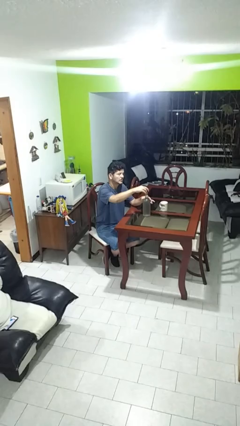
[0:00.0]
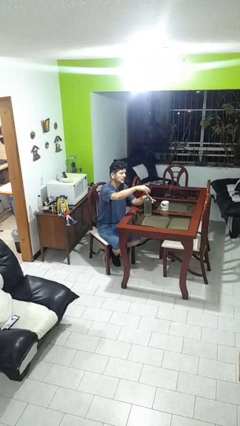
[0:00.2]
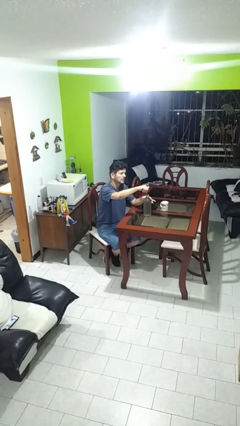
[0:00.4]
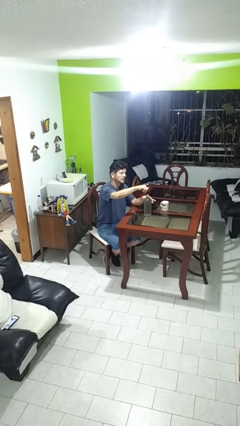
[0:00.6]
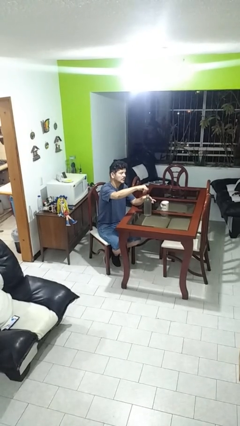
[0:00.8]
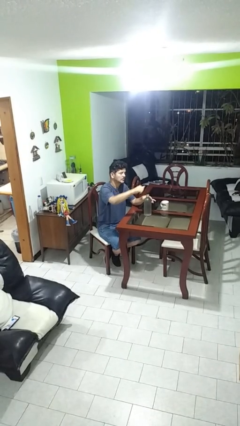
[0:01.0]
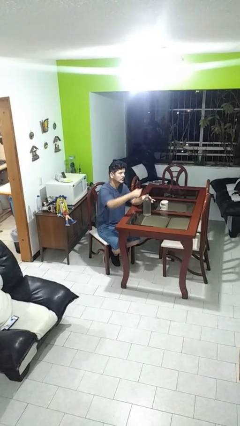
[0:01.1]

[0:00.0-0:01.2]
person screws lid to bottle

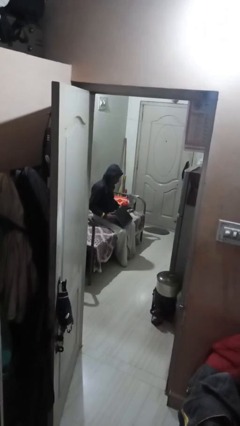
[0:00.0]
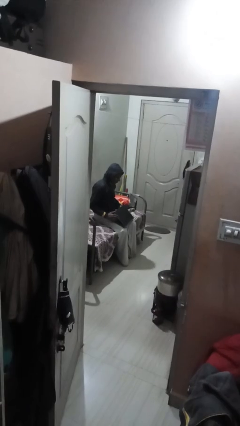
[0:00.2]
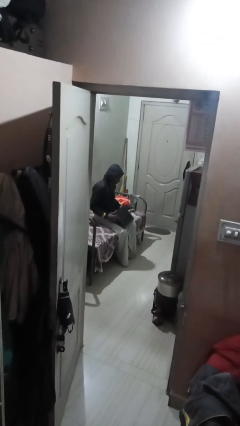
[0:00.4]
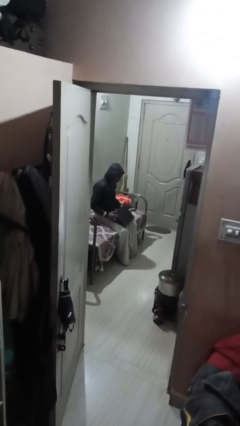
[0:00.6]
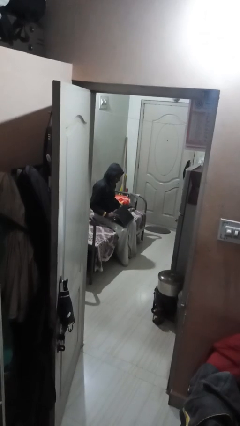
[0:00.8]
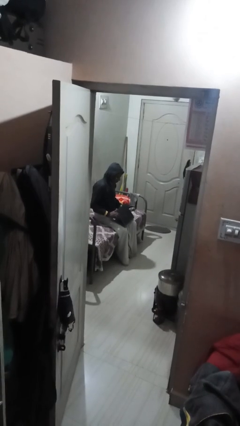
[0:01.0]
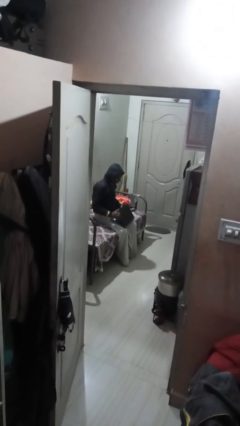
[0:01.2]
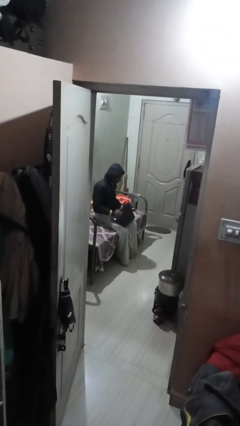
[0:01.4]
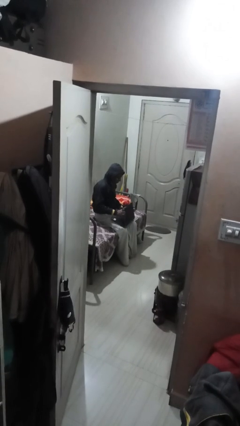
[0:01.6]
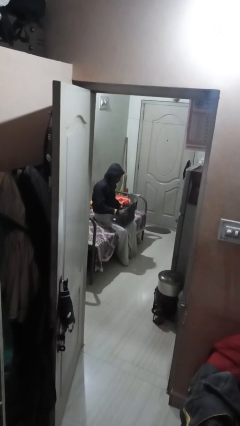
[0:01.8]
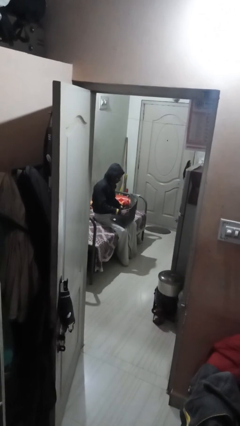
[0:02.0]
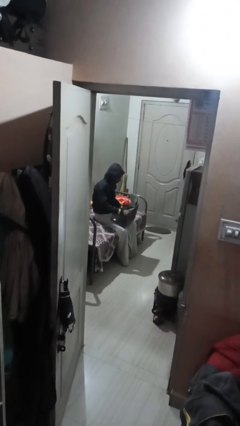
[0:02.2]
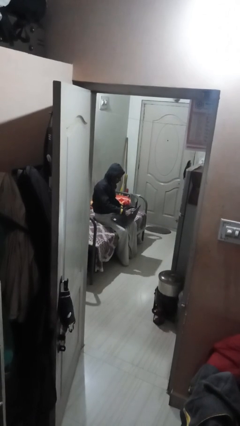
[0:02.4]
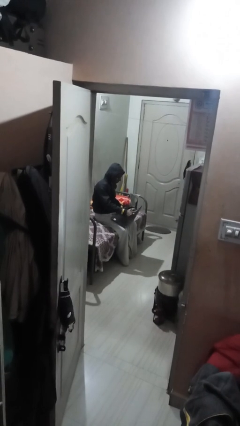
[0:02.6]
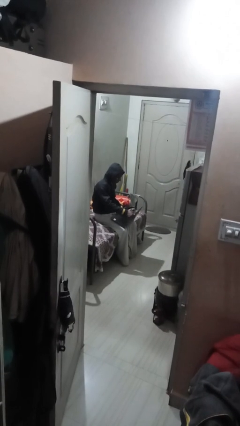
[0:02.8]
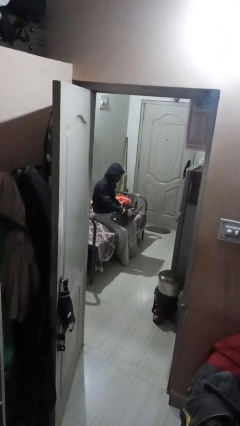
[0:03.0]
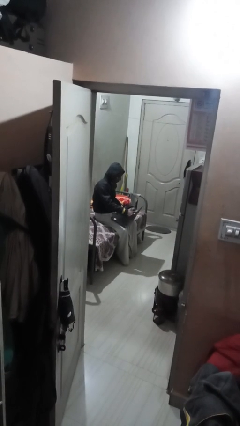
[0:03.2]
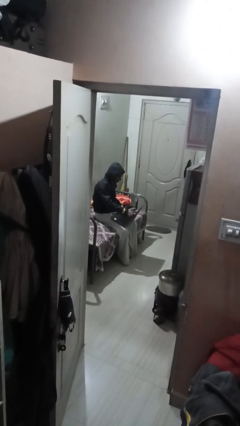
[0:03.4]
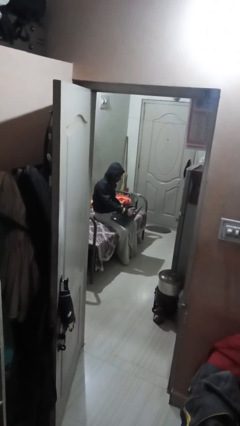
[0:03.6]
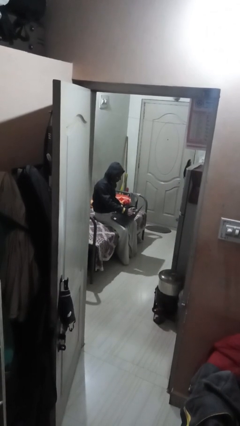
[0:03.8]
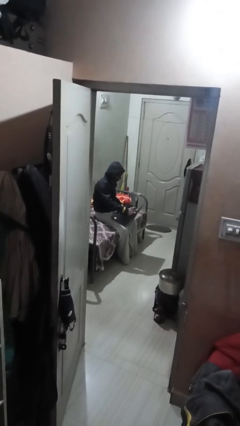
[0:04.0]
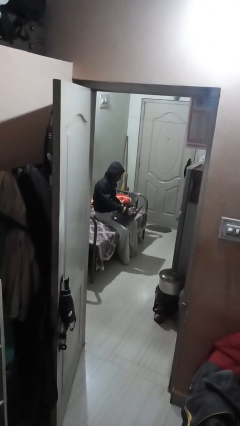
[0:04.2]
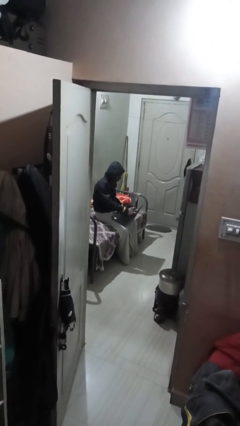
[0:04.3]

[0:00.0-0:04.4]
person interacts with laptop

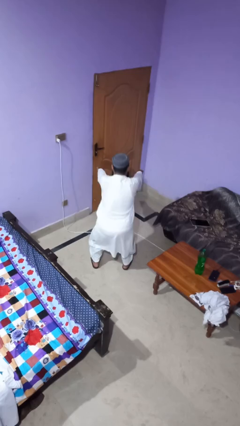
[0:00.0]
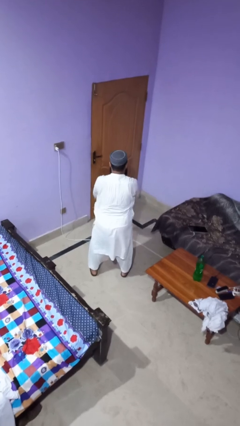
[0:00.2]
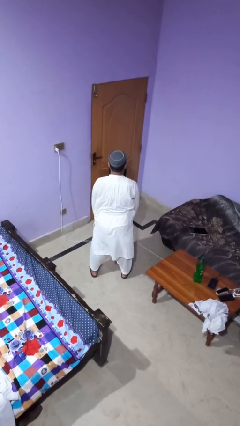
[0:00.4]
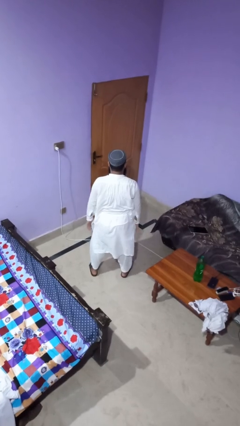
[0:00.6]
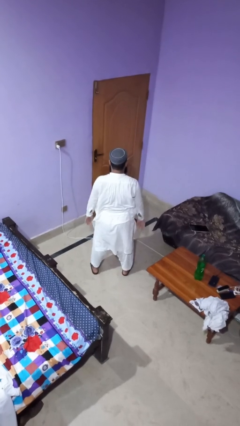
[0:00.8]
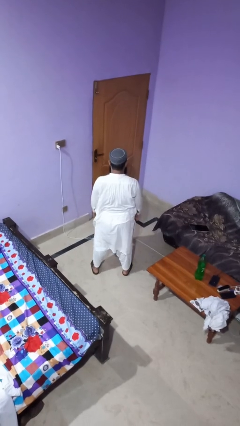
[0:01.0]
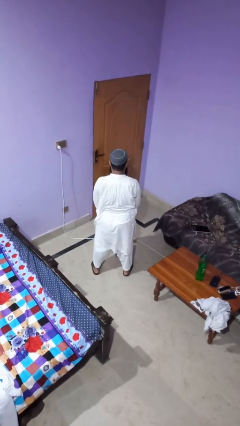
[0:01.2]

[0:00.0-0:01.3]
person stands up

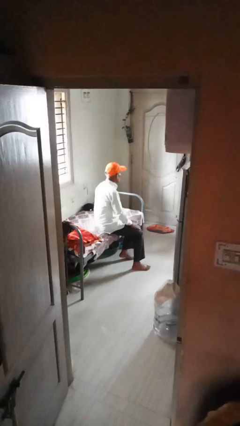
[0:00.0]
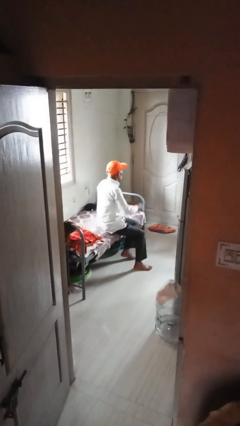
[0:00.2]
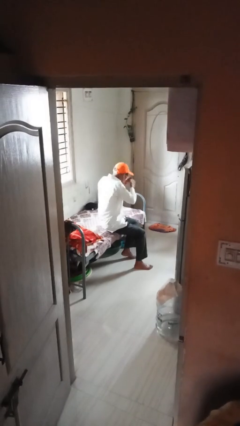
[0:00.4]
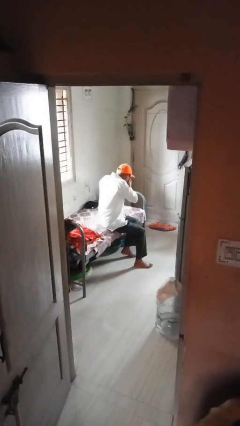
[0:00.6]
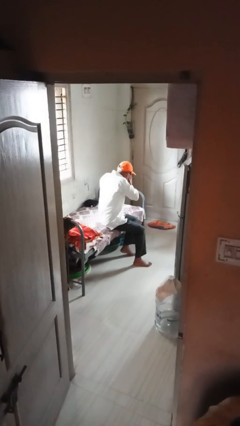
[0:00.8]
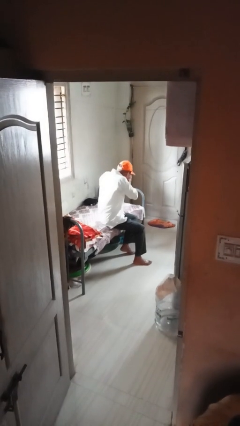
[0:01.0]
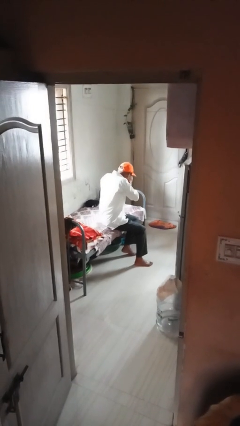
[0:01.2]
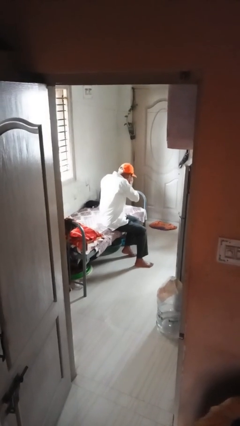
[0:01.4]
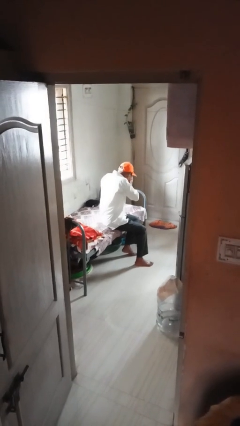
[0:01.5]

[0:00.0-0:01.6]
person sneezes into hand

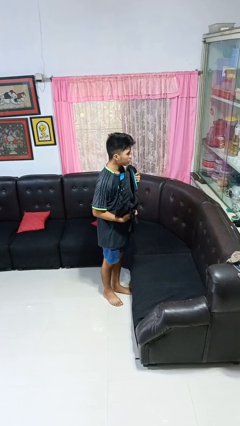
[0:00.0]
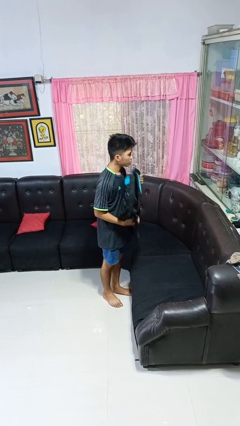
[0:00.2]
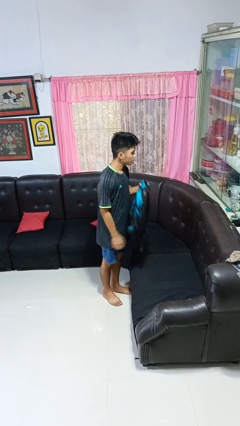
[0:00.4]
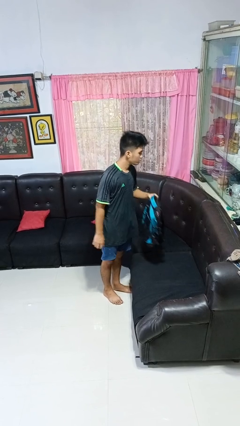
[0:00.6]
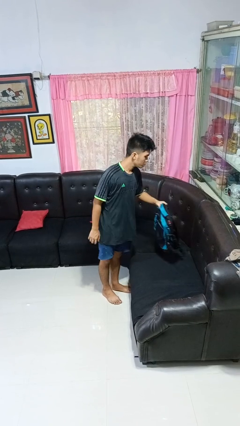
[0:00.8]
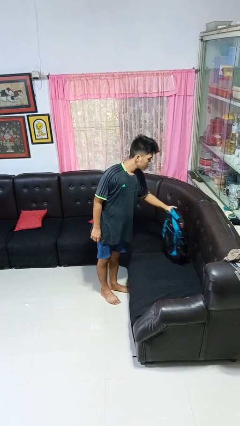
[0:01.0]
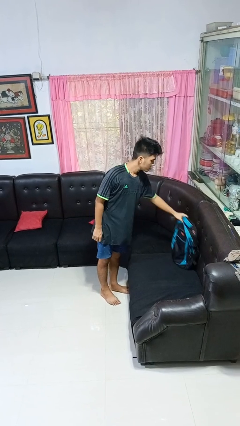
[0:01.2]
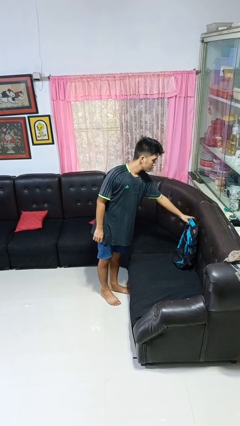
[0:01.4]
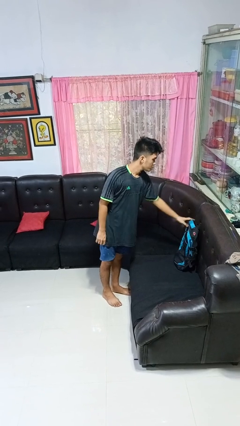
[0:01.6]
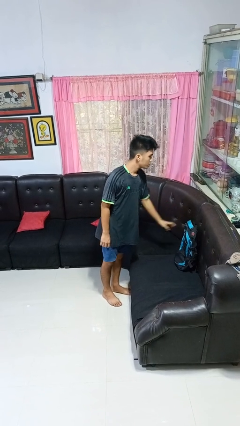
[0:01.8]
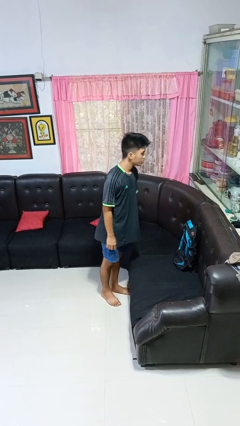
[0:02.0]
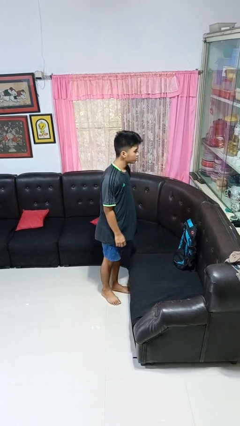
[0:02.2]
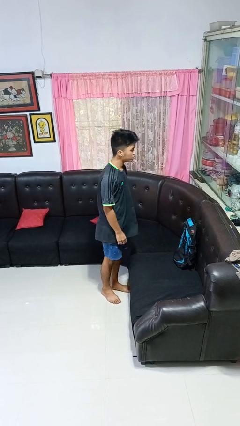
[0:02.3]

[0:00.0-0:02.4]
person puts down object on couch

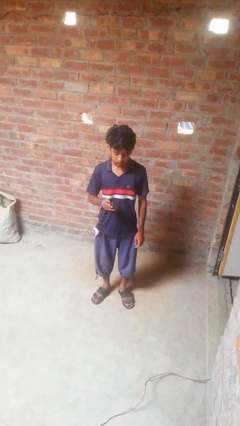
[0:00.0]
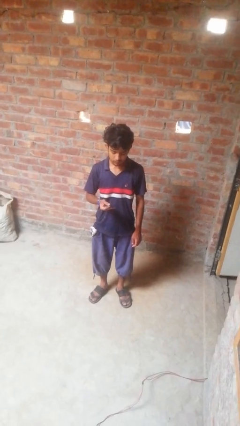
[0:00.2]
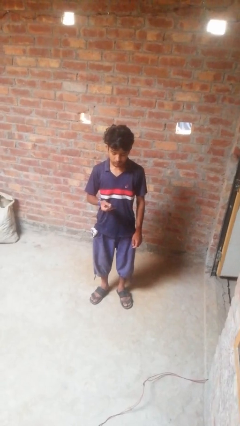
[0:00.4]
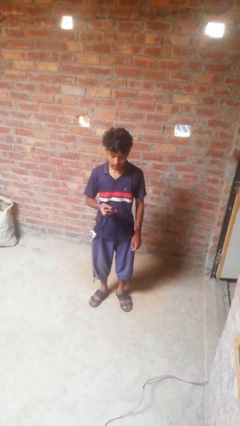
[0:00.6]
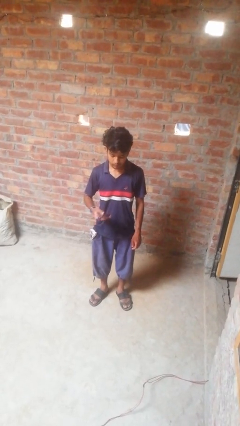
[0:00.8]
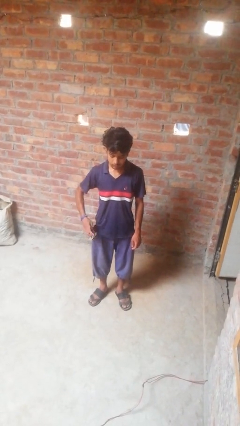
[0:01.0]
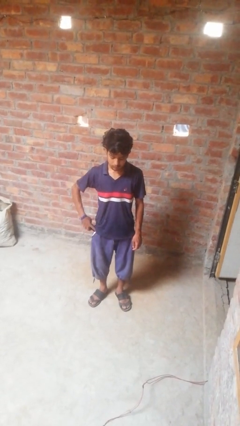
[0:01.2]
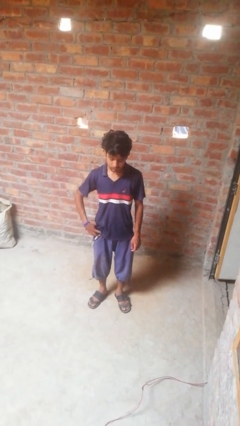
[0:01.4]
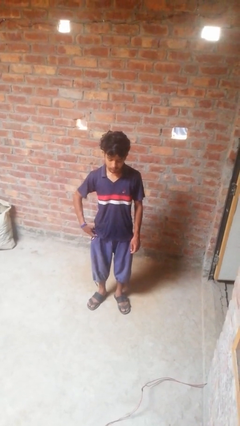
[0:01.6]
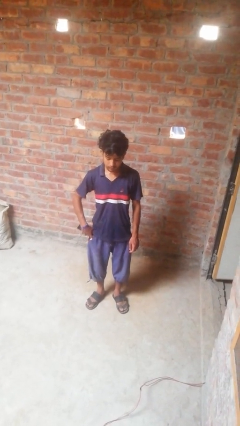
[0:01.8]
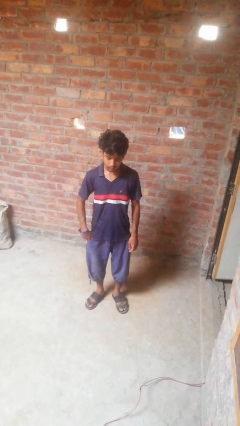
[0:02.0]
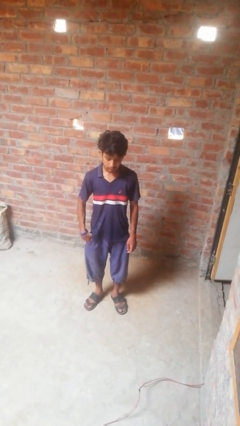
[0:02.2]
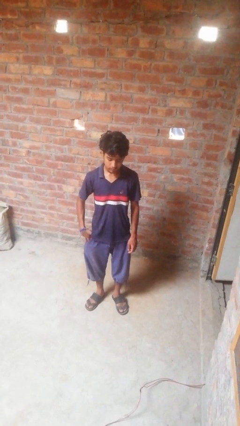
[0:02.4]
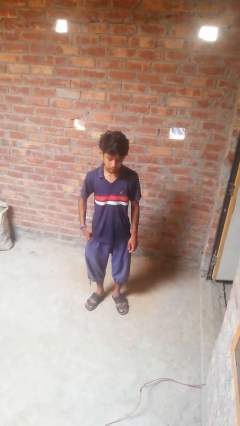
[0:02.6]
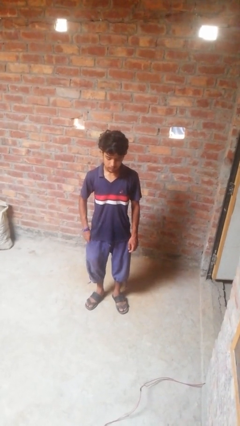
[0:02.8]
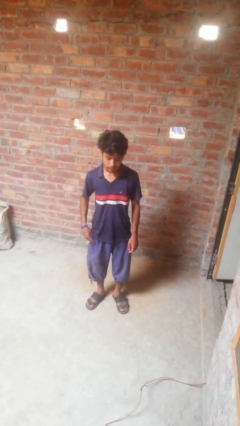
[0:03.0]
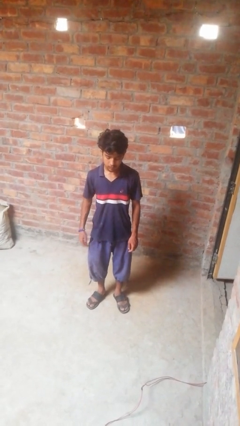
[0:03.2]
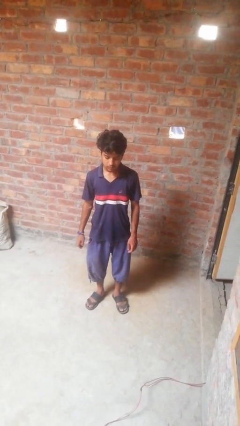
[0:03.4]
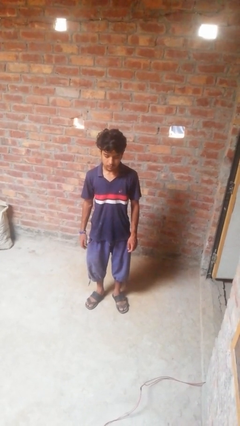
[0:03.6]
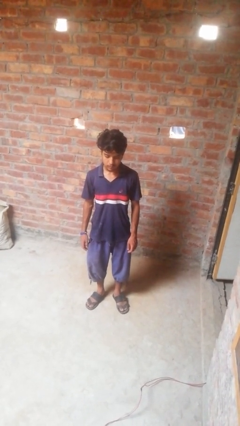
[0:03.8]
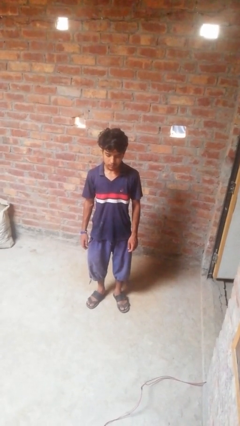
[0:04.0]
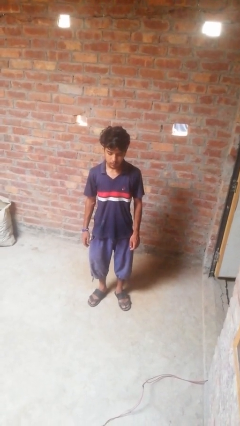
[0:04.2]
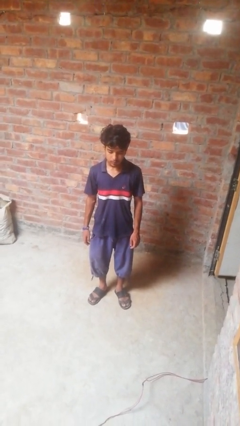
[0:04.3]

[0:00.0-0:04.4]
person puts phone into pocket

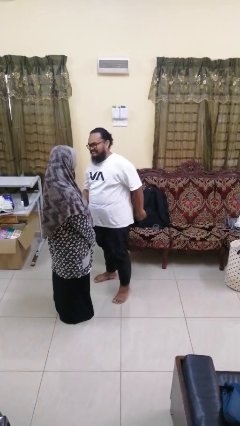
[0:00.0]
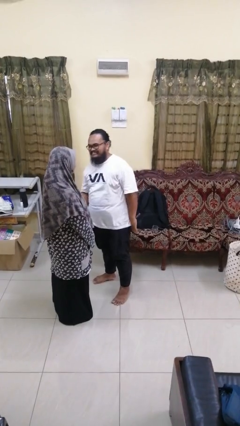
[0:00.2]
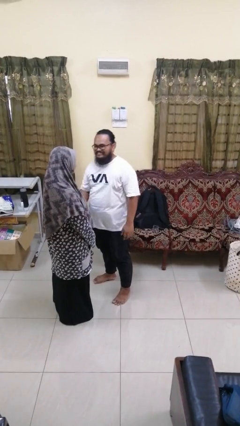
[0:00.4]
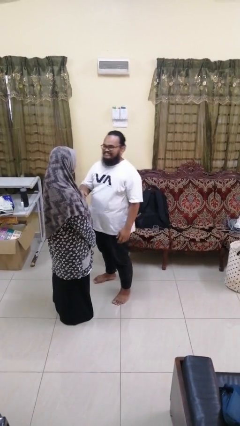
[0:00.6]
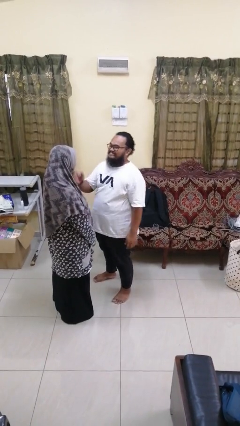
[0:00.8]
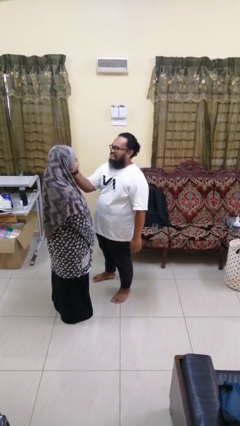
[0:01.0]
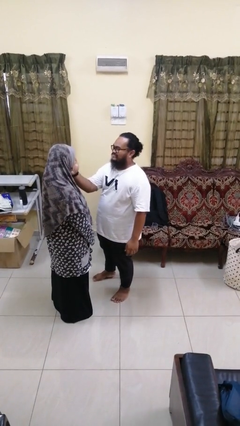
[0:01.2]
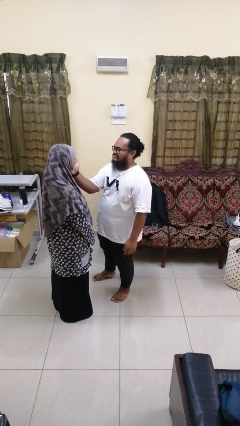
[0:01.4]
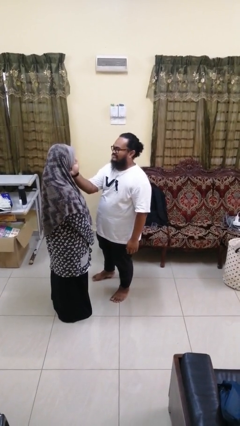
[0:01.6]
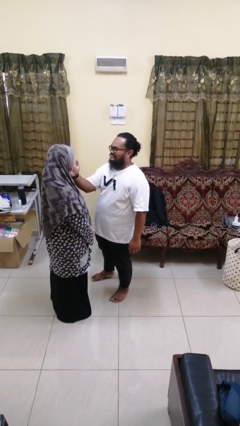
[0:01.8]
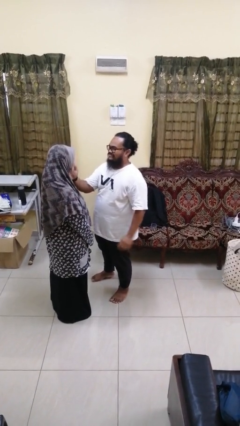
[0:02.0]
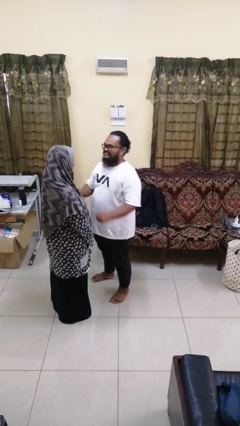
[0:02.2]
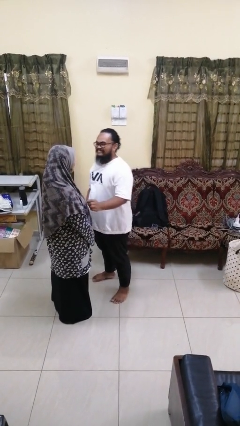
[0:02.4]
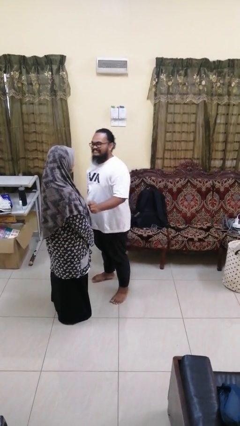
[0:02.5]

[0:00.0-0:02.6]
person touches face of person
